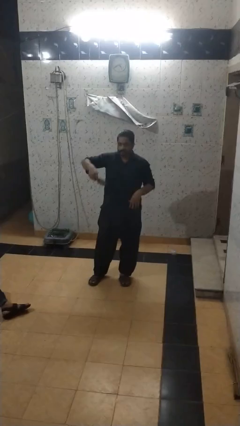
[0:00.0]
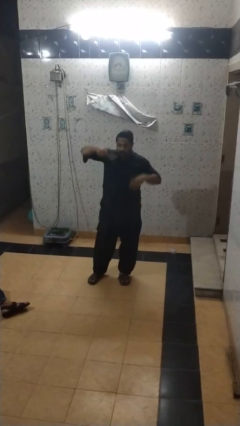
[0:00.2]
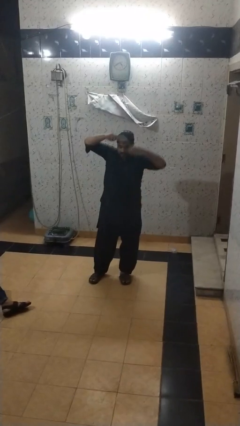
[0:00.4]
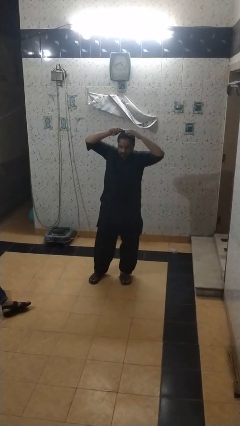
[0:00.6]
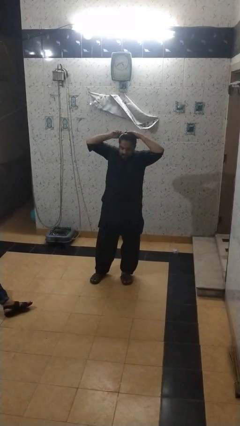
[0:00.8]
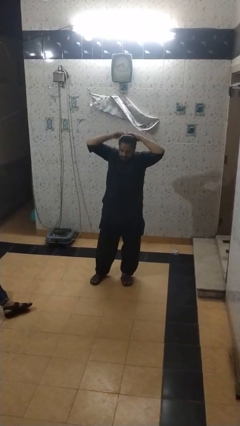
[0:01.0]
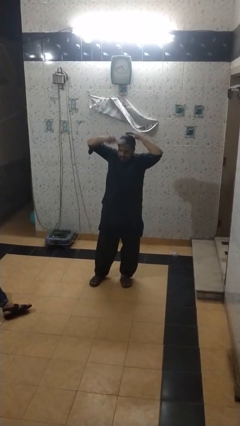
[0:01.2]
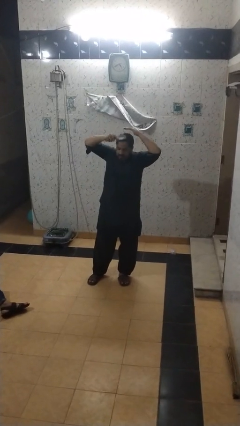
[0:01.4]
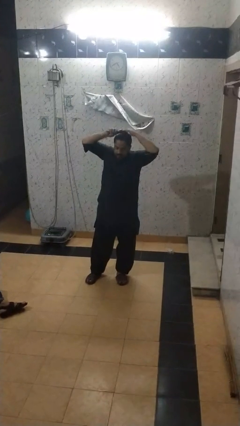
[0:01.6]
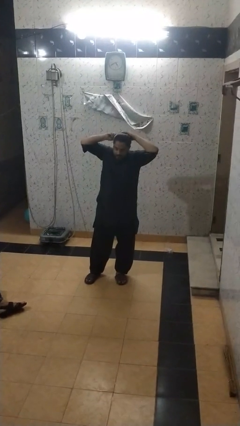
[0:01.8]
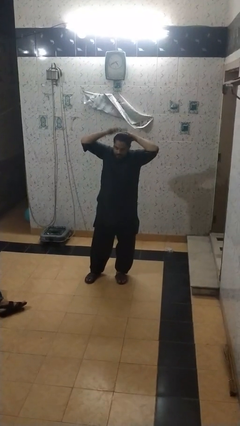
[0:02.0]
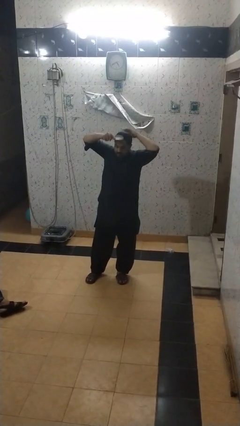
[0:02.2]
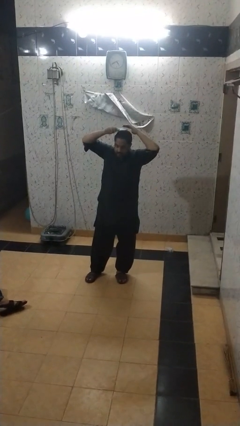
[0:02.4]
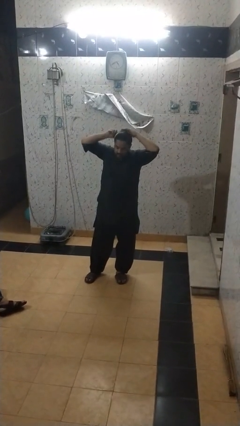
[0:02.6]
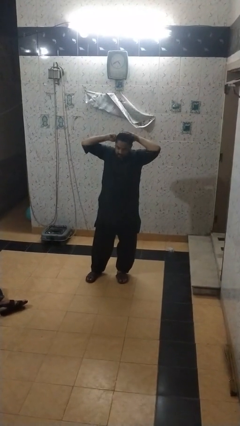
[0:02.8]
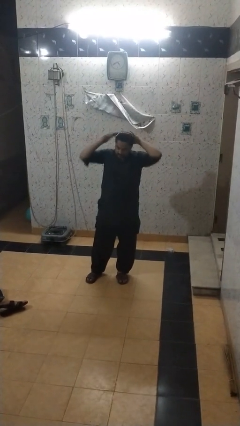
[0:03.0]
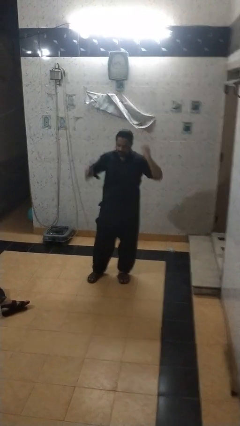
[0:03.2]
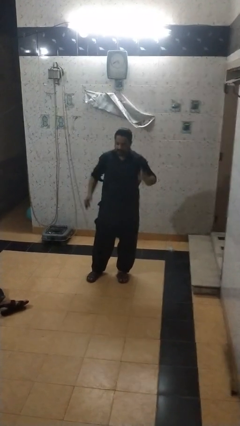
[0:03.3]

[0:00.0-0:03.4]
person brushes hair

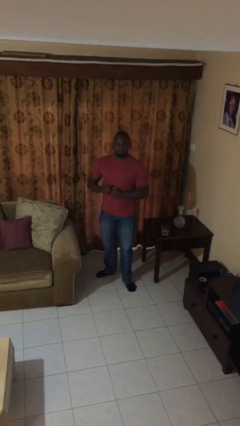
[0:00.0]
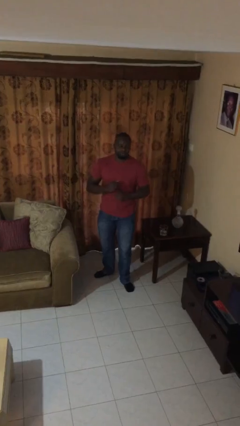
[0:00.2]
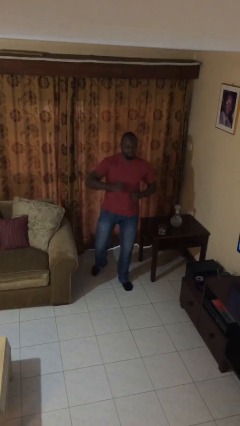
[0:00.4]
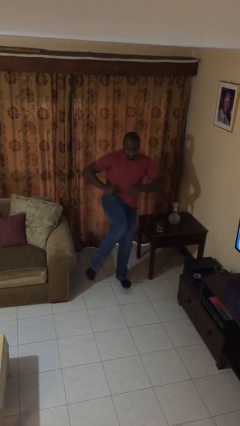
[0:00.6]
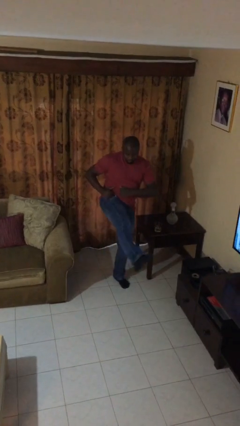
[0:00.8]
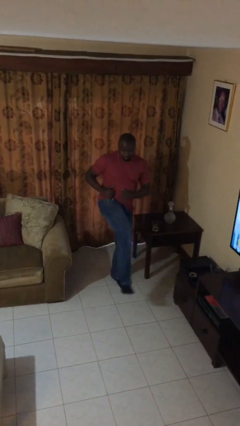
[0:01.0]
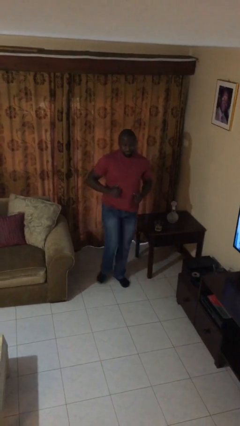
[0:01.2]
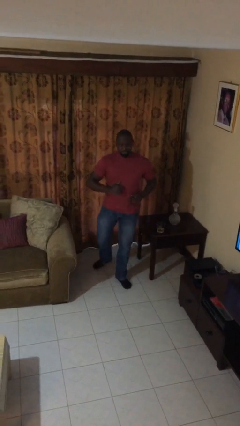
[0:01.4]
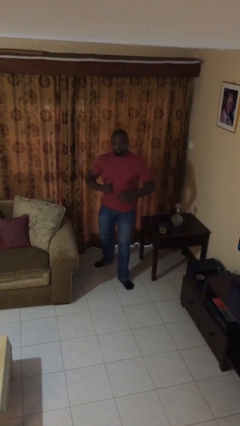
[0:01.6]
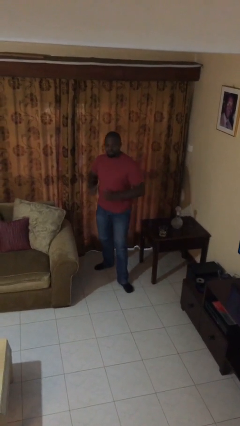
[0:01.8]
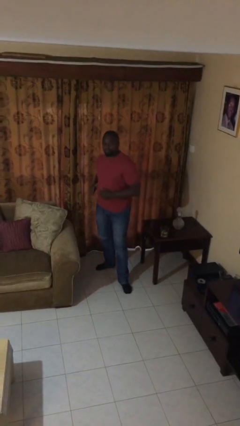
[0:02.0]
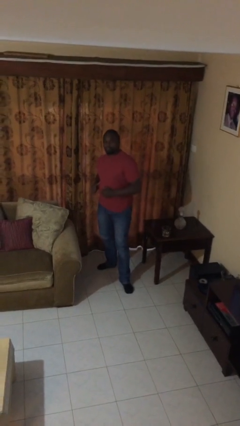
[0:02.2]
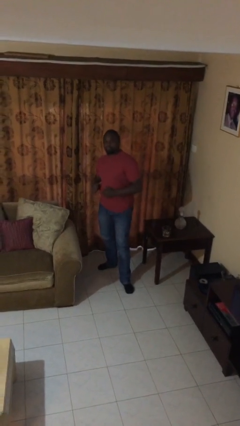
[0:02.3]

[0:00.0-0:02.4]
person karate kicks

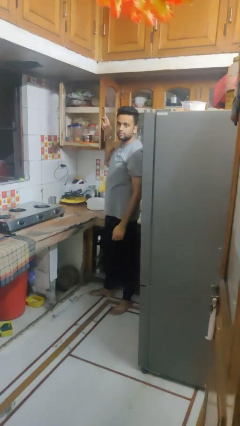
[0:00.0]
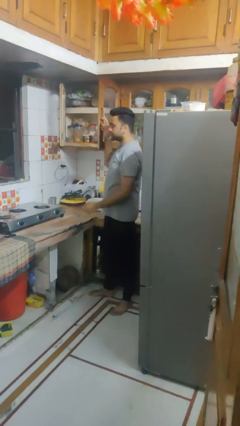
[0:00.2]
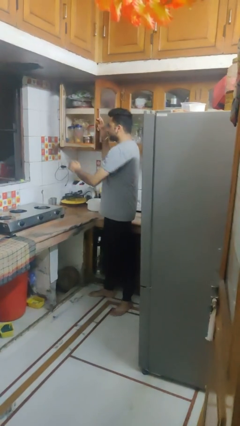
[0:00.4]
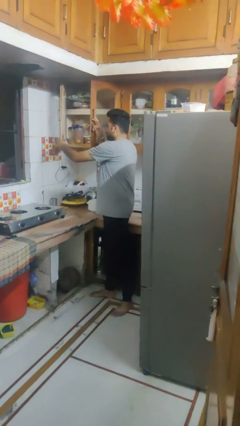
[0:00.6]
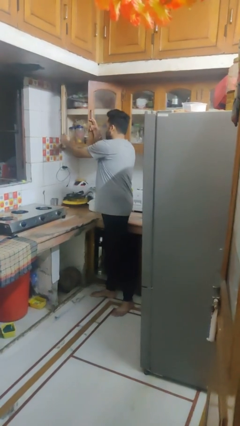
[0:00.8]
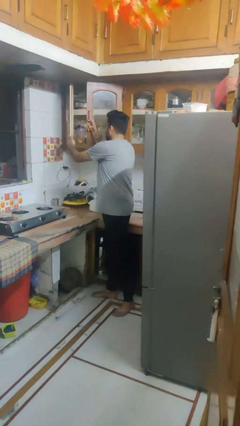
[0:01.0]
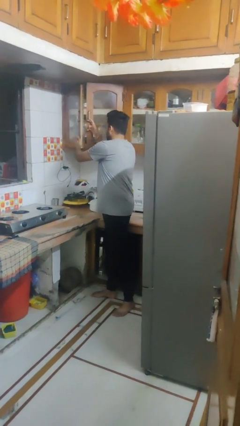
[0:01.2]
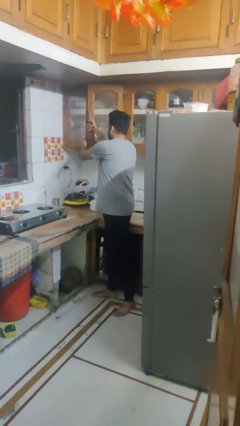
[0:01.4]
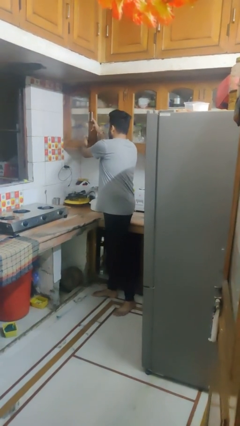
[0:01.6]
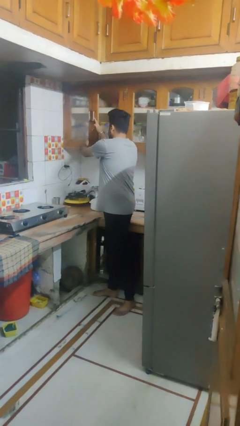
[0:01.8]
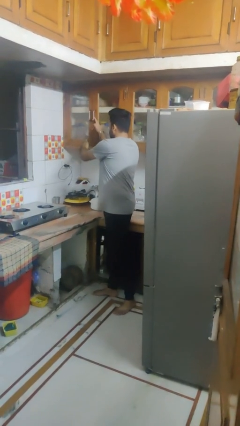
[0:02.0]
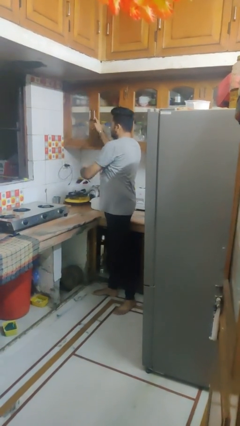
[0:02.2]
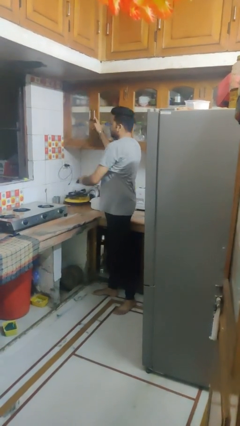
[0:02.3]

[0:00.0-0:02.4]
person closes cabinet

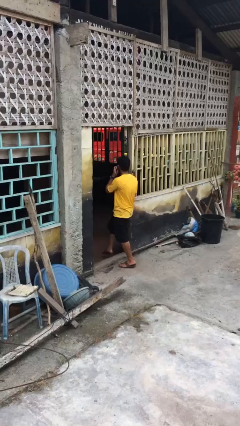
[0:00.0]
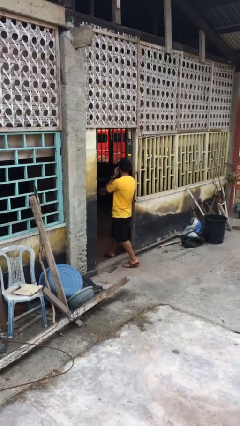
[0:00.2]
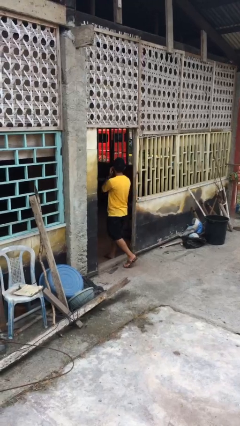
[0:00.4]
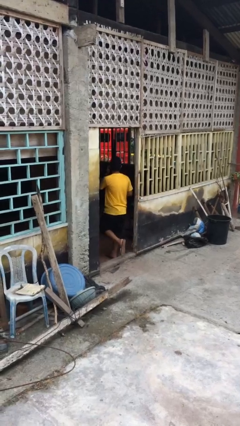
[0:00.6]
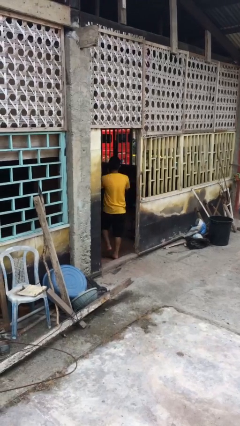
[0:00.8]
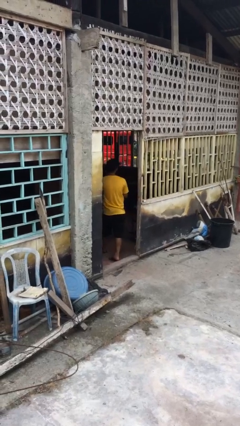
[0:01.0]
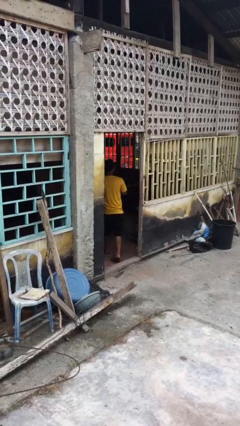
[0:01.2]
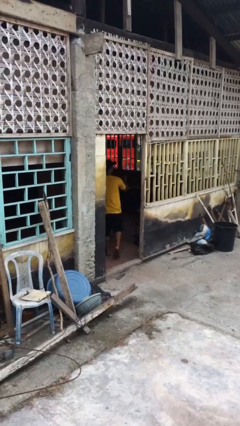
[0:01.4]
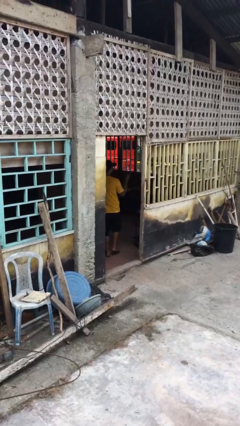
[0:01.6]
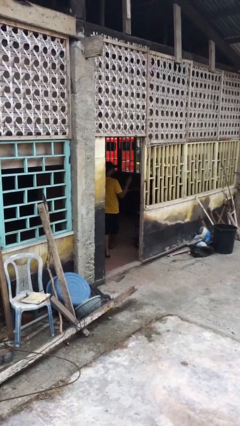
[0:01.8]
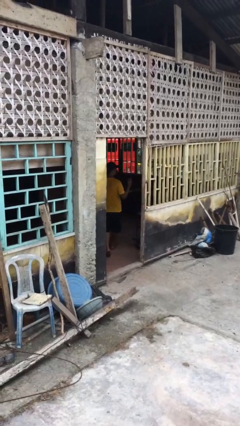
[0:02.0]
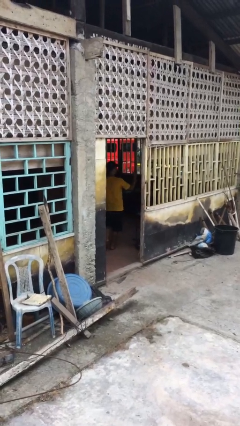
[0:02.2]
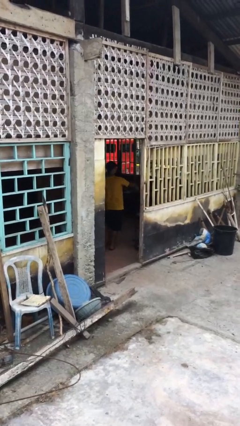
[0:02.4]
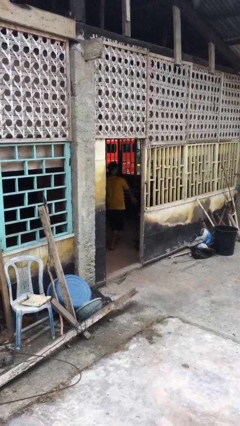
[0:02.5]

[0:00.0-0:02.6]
person exits scene through structure

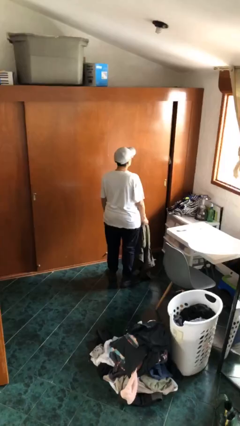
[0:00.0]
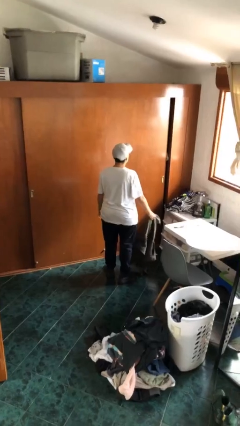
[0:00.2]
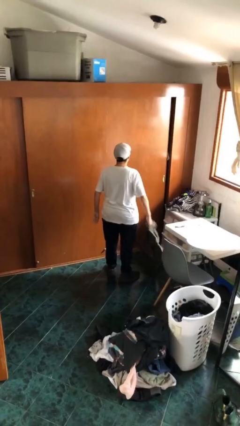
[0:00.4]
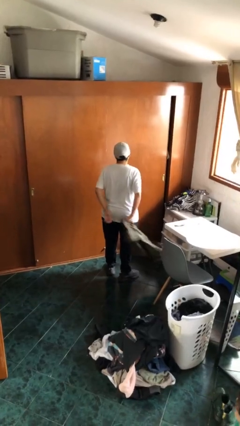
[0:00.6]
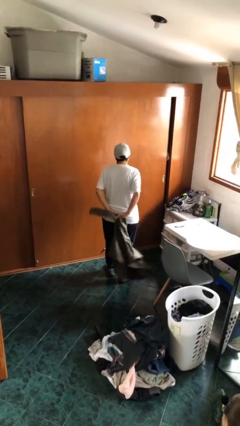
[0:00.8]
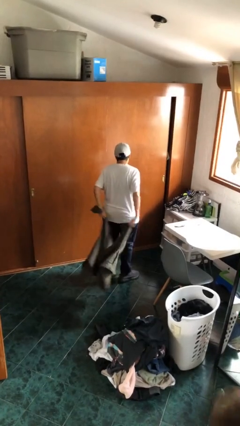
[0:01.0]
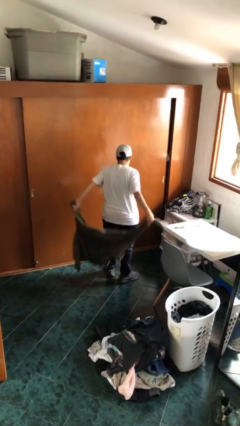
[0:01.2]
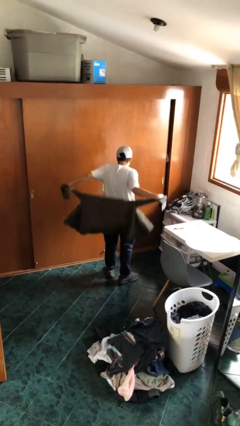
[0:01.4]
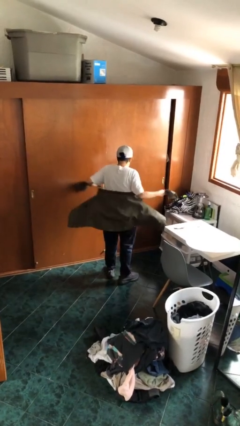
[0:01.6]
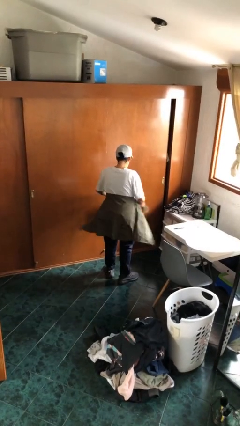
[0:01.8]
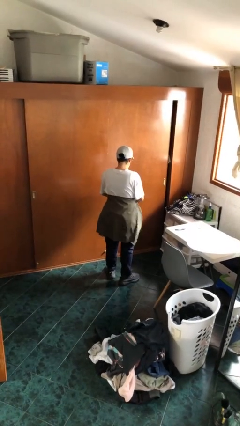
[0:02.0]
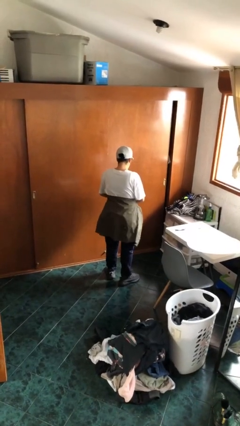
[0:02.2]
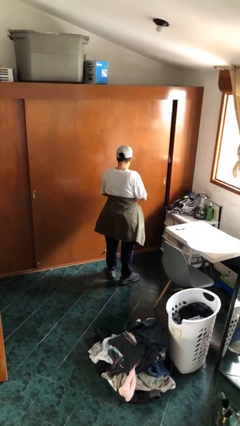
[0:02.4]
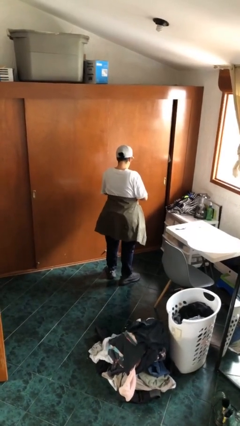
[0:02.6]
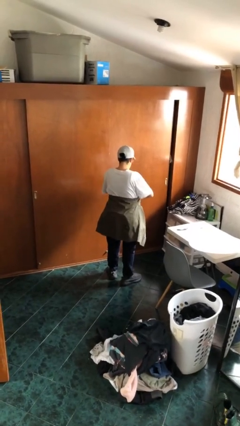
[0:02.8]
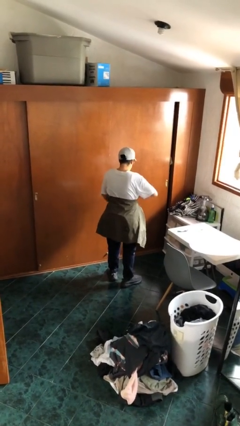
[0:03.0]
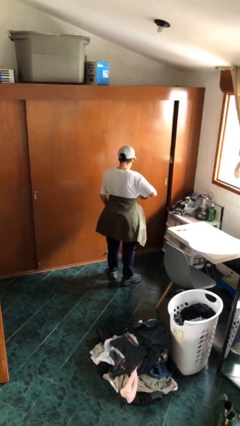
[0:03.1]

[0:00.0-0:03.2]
person ties jacket around waist

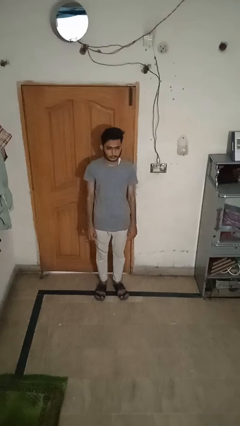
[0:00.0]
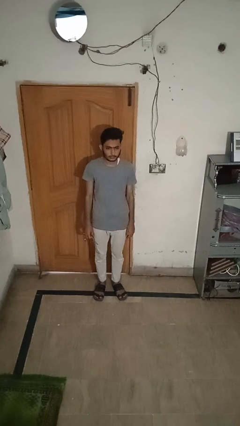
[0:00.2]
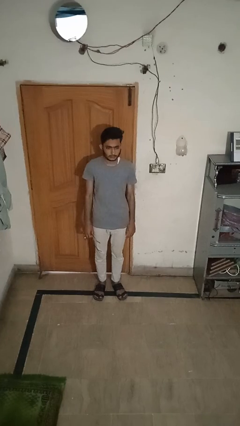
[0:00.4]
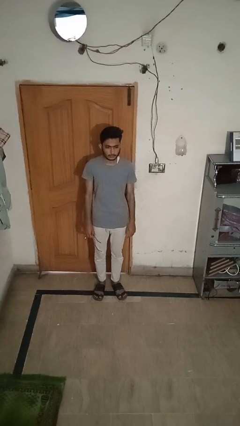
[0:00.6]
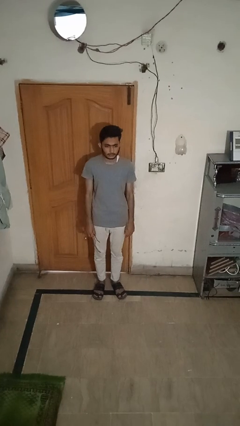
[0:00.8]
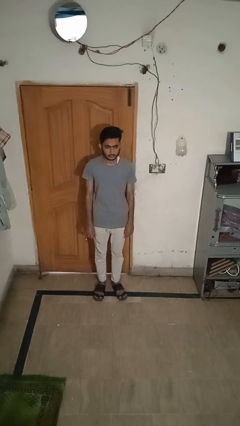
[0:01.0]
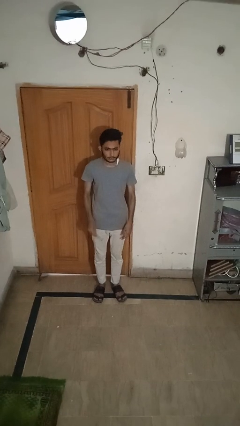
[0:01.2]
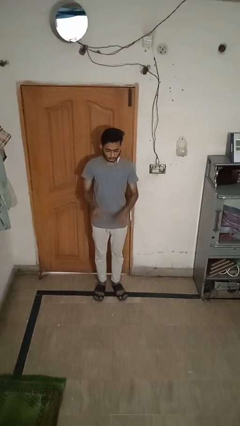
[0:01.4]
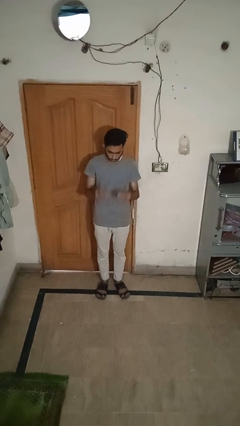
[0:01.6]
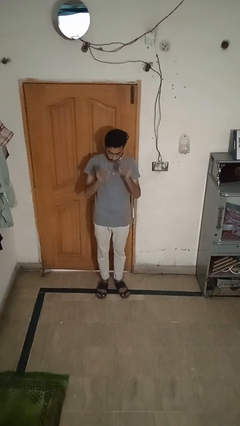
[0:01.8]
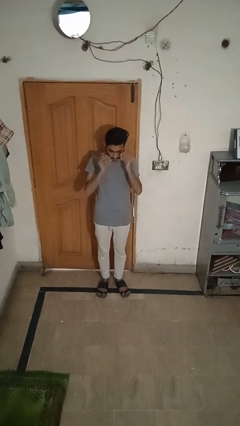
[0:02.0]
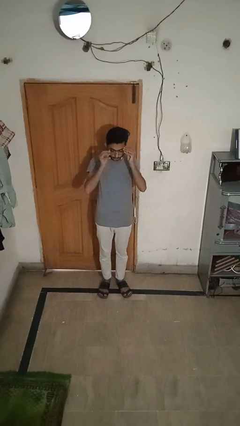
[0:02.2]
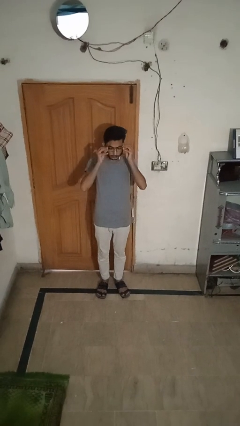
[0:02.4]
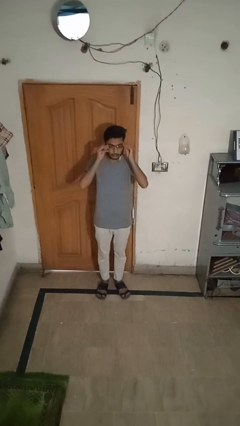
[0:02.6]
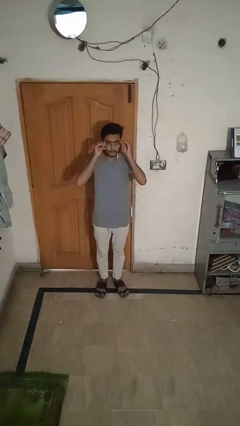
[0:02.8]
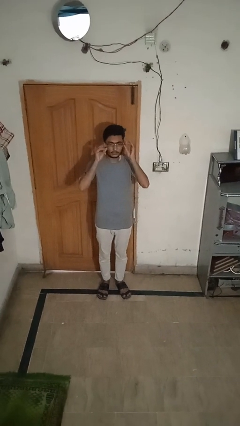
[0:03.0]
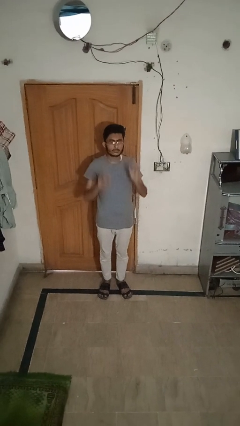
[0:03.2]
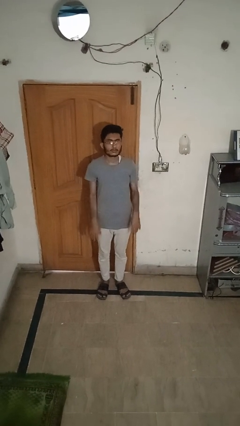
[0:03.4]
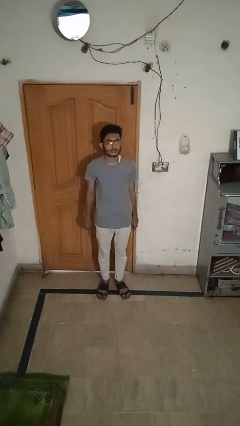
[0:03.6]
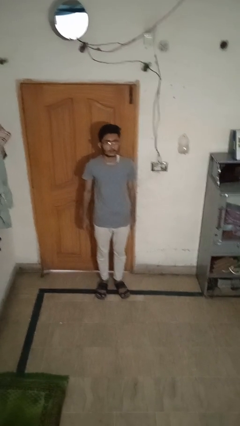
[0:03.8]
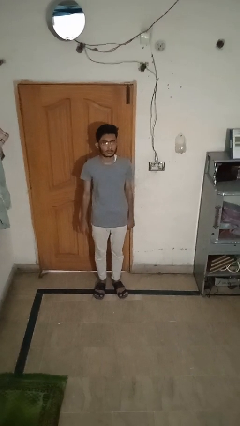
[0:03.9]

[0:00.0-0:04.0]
person puts on glasses
